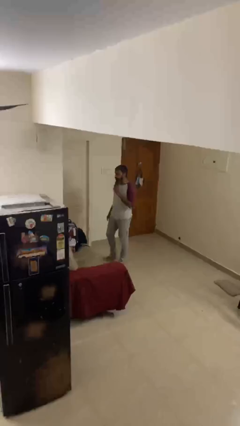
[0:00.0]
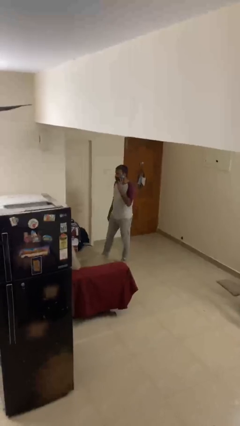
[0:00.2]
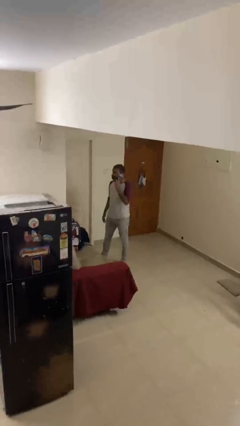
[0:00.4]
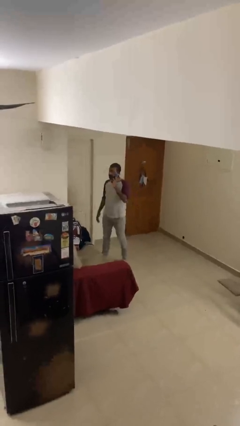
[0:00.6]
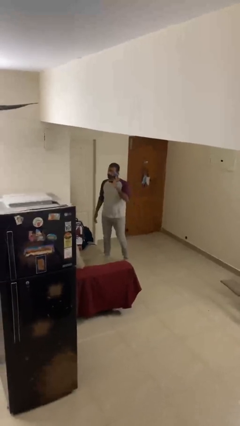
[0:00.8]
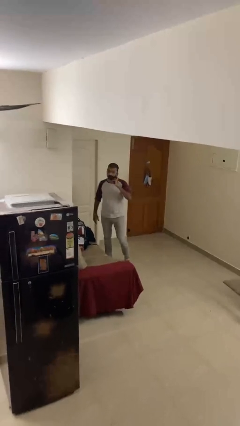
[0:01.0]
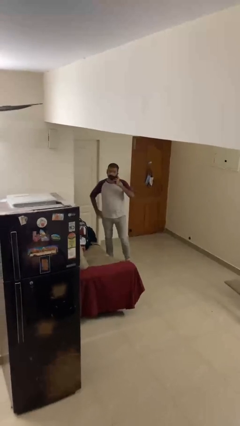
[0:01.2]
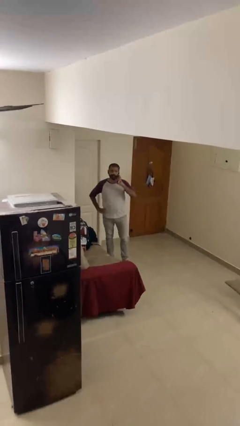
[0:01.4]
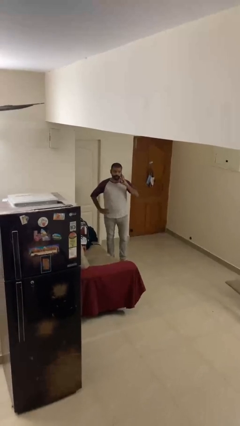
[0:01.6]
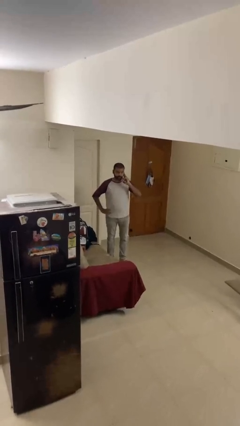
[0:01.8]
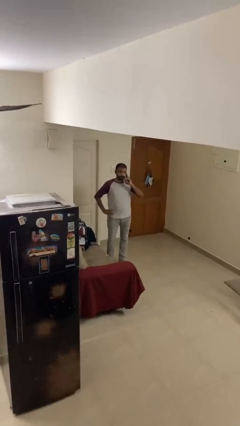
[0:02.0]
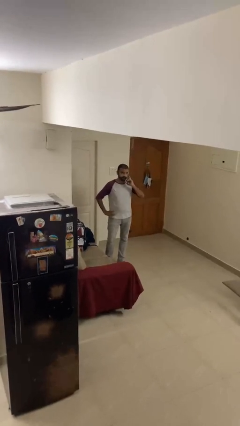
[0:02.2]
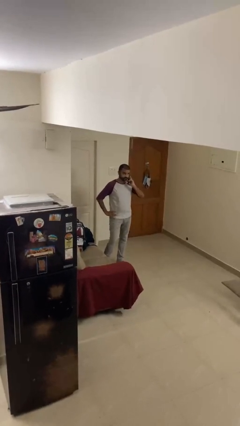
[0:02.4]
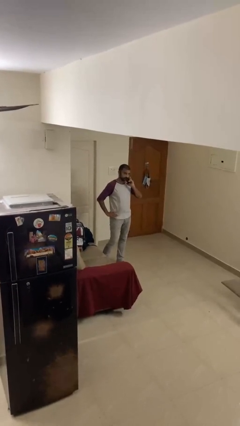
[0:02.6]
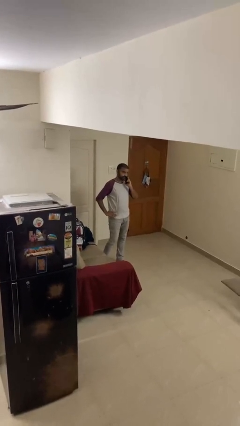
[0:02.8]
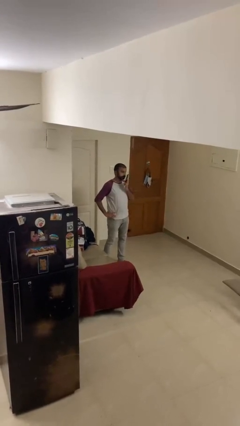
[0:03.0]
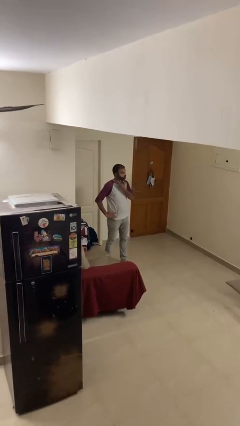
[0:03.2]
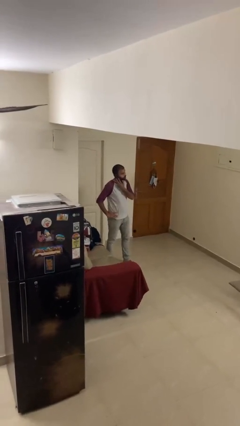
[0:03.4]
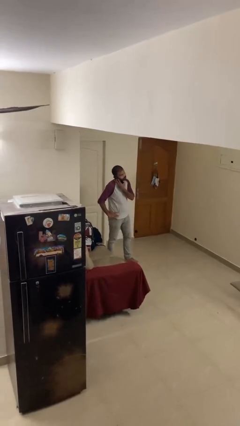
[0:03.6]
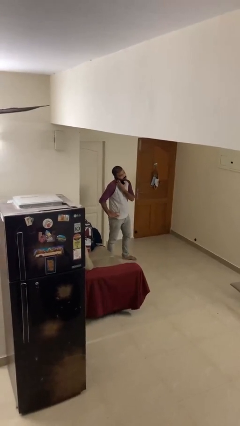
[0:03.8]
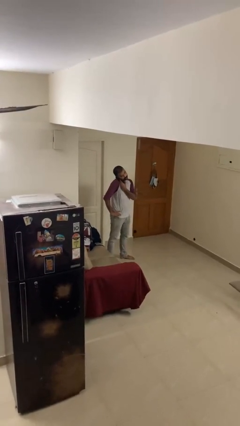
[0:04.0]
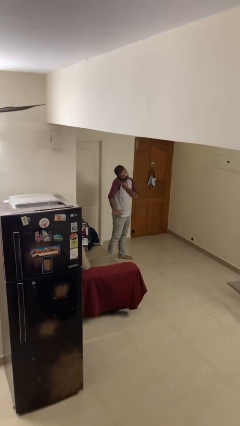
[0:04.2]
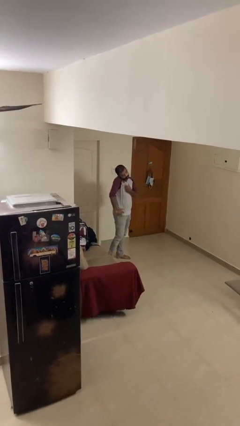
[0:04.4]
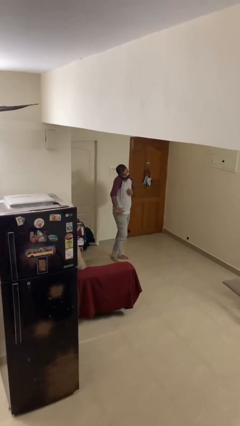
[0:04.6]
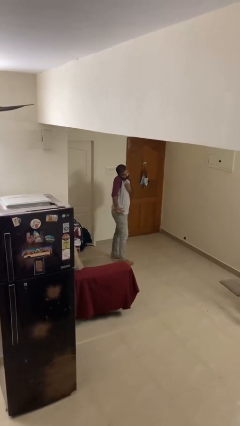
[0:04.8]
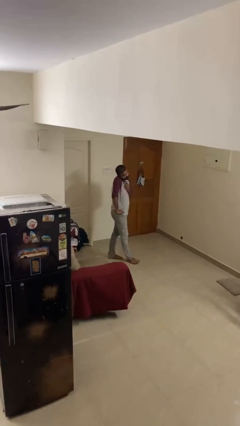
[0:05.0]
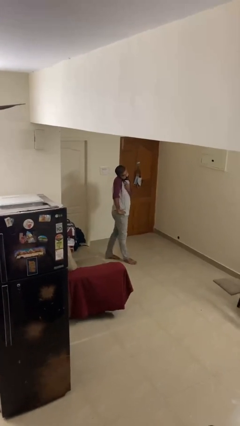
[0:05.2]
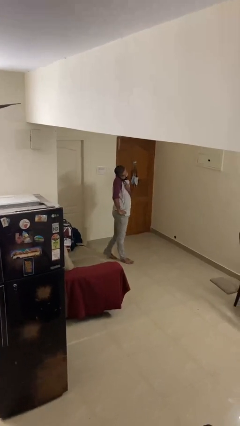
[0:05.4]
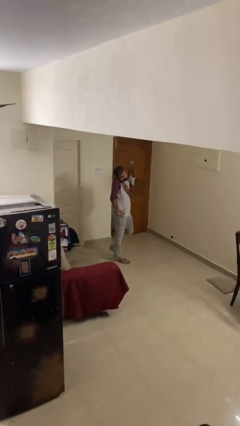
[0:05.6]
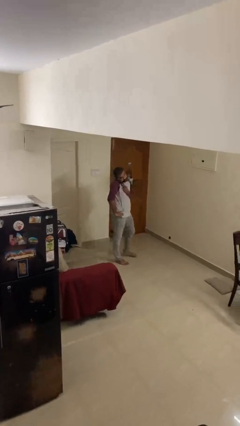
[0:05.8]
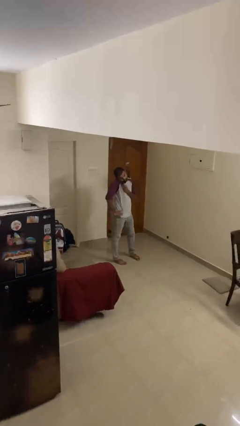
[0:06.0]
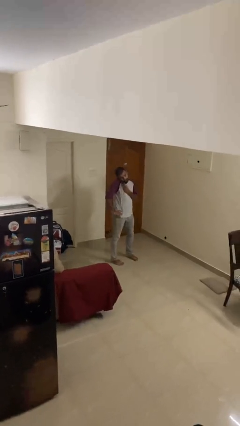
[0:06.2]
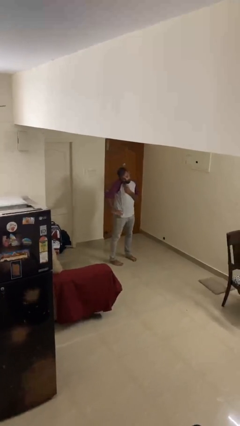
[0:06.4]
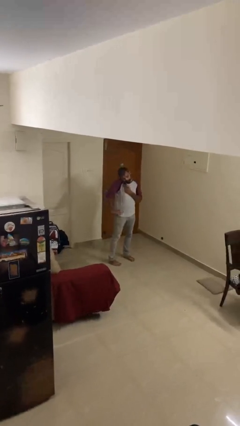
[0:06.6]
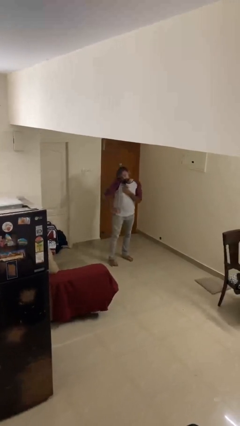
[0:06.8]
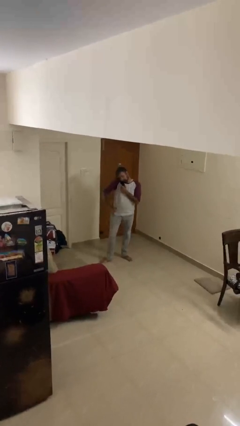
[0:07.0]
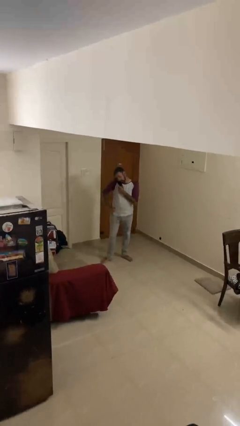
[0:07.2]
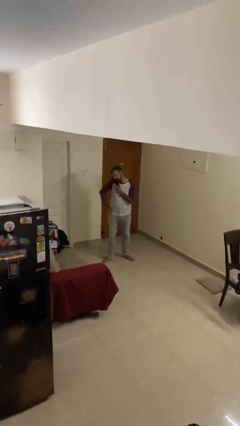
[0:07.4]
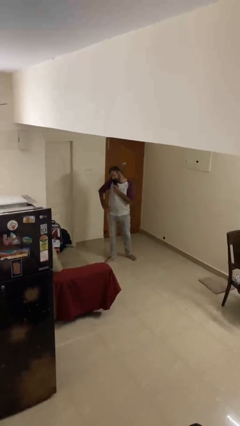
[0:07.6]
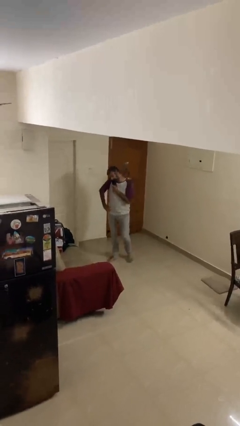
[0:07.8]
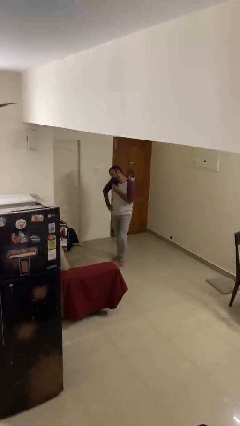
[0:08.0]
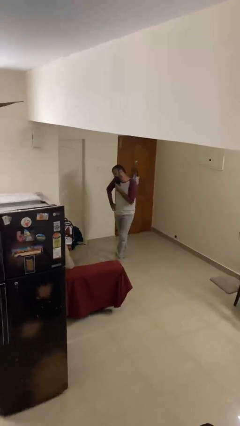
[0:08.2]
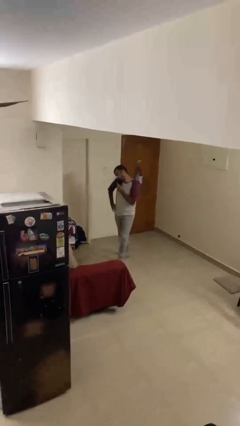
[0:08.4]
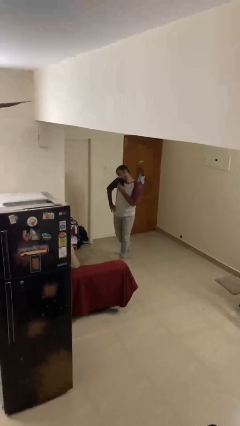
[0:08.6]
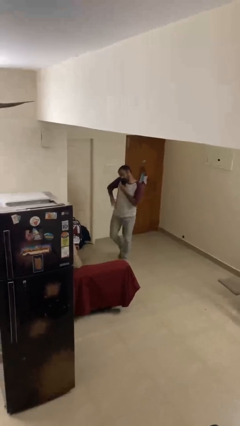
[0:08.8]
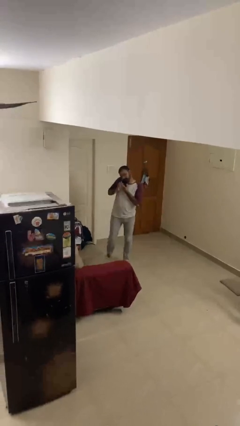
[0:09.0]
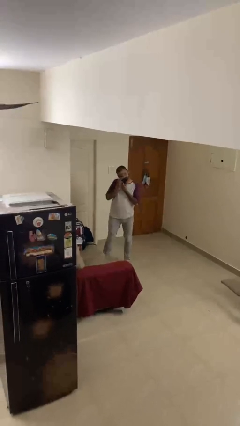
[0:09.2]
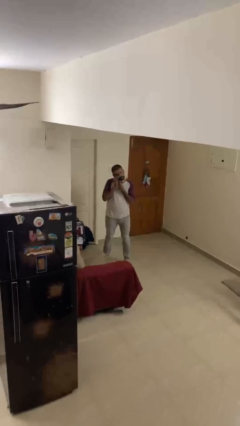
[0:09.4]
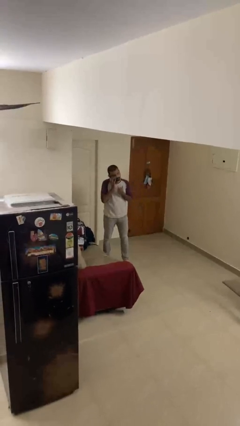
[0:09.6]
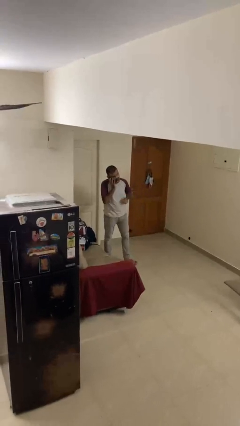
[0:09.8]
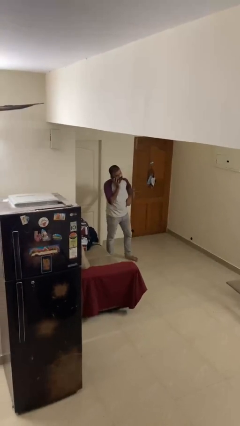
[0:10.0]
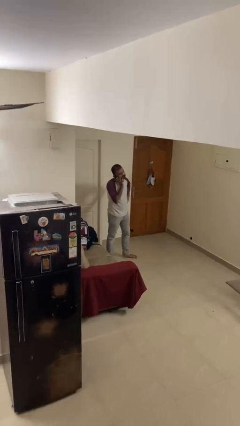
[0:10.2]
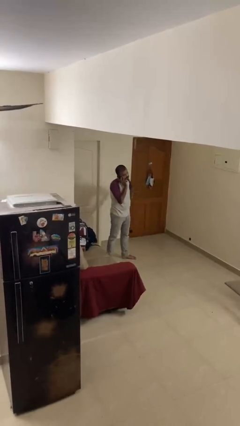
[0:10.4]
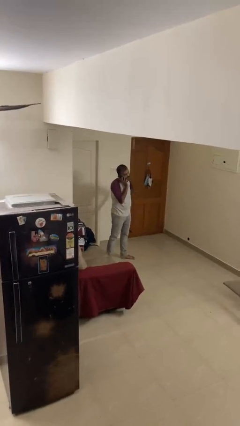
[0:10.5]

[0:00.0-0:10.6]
person talks on phone

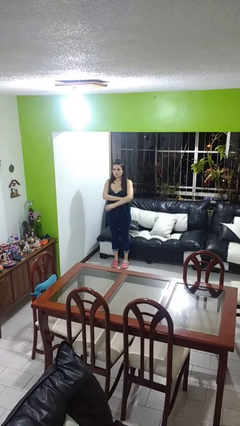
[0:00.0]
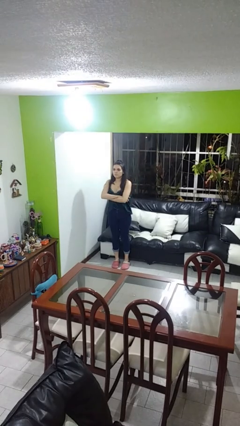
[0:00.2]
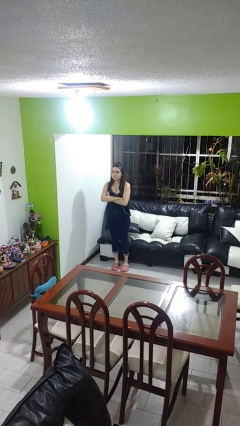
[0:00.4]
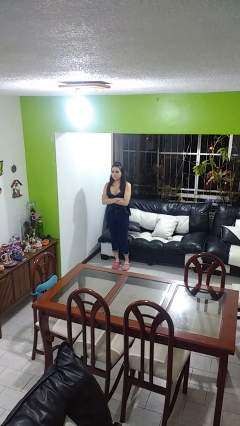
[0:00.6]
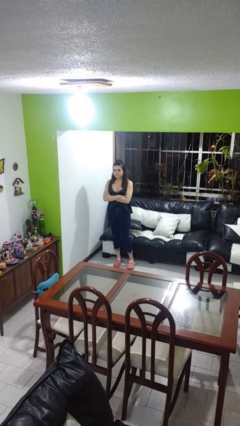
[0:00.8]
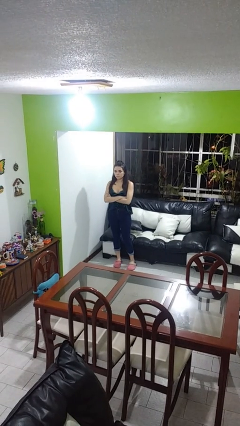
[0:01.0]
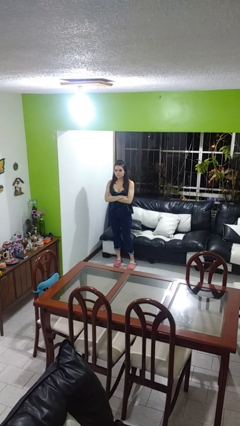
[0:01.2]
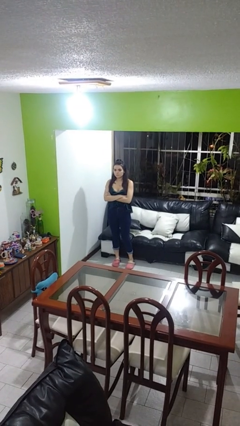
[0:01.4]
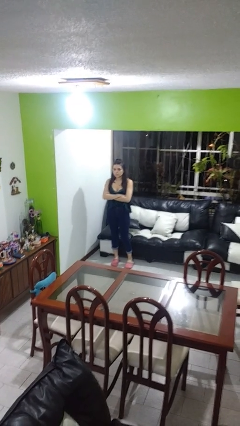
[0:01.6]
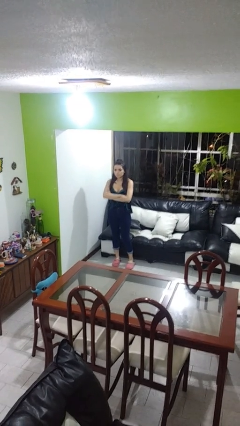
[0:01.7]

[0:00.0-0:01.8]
person crosses arms

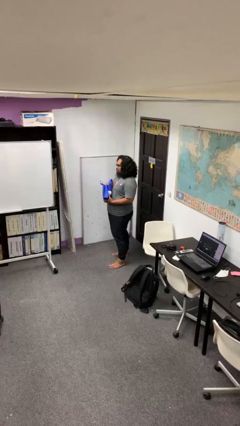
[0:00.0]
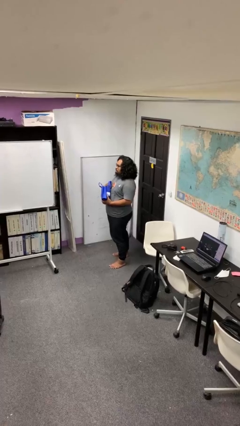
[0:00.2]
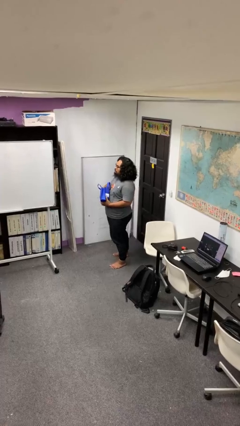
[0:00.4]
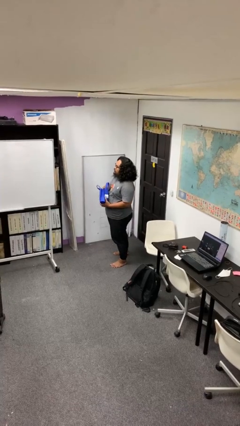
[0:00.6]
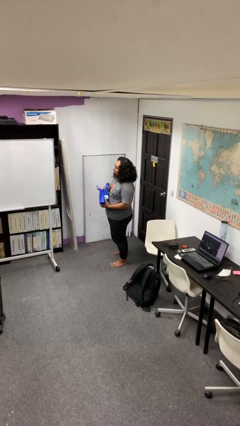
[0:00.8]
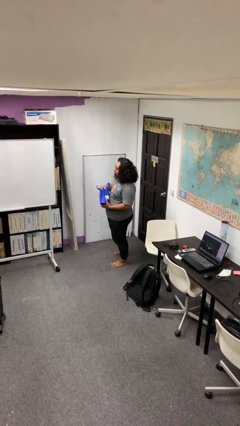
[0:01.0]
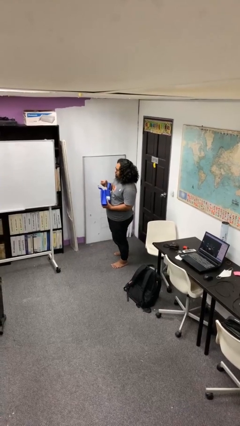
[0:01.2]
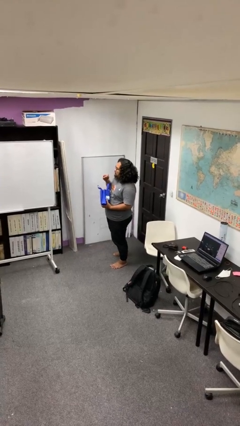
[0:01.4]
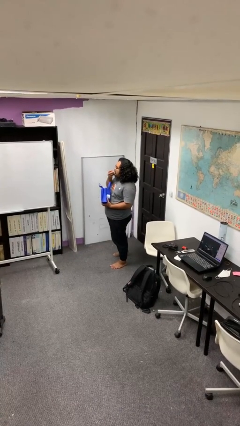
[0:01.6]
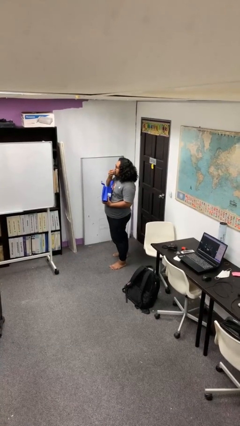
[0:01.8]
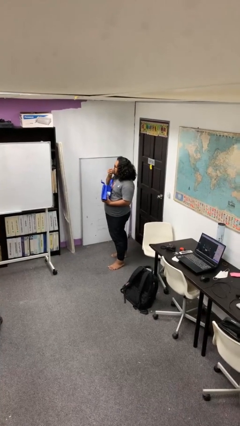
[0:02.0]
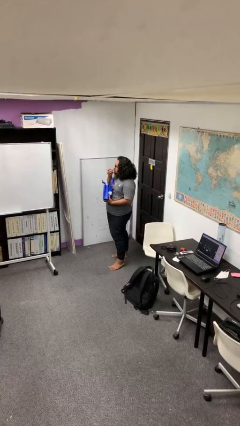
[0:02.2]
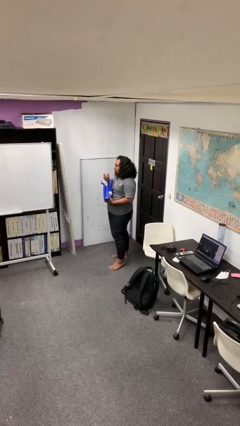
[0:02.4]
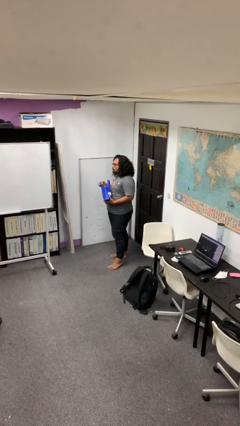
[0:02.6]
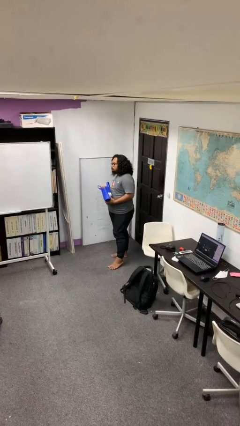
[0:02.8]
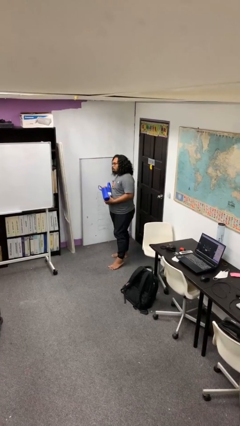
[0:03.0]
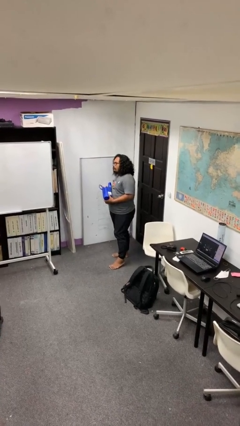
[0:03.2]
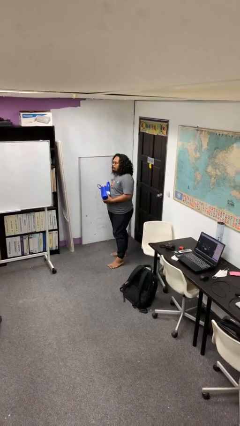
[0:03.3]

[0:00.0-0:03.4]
person eats snack from bag

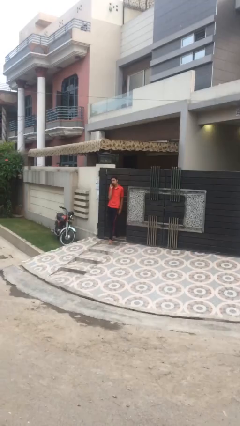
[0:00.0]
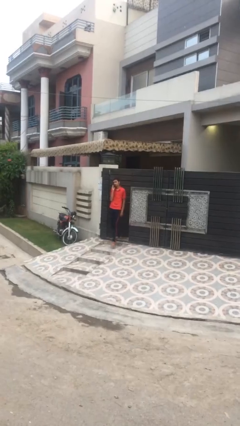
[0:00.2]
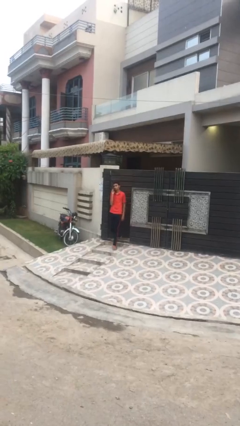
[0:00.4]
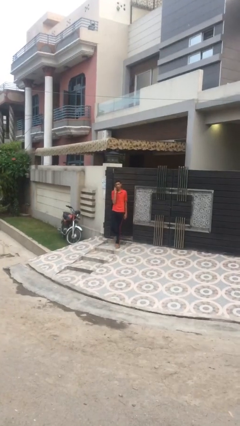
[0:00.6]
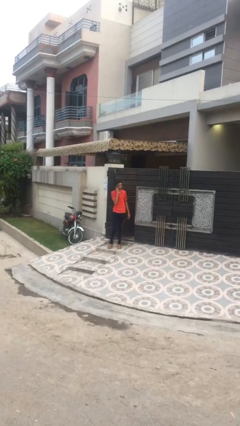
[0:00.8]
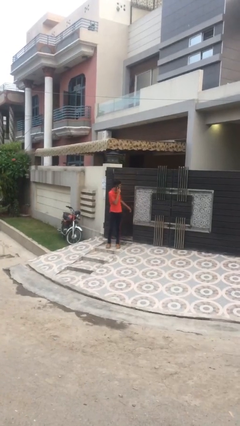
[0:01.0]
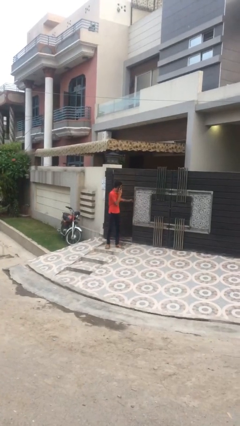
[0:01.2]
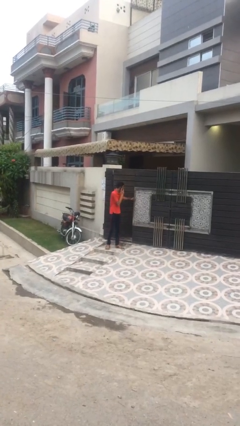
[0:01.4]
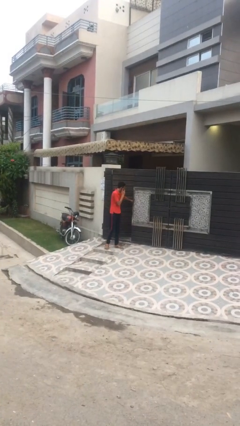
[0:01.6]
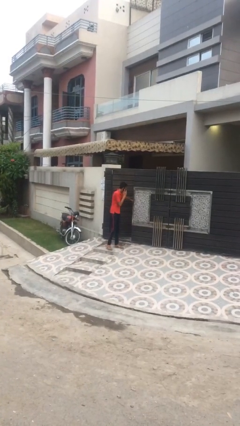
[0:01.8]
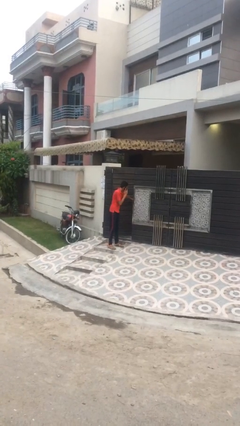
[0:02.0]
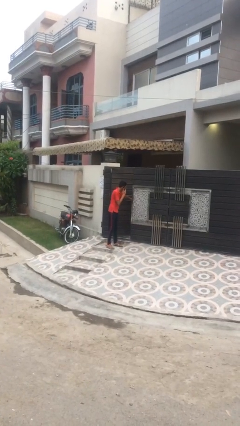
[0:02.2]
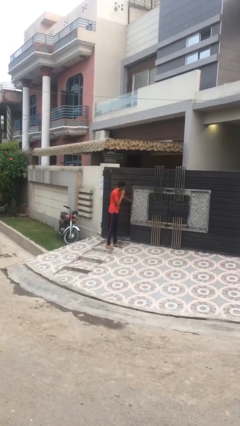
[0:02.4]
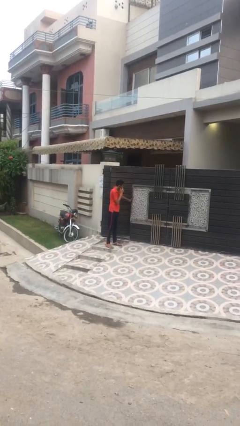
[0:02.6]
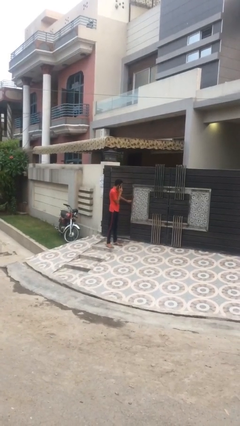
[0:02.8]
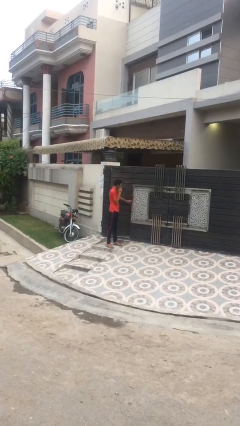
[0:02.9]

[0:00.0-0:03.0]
person closes facility door
